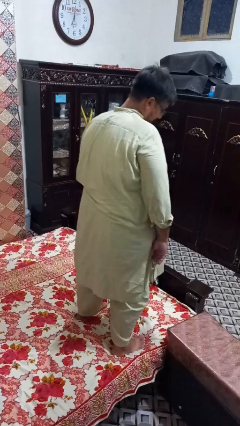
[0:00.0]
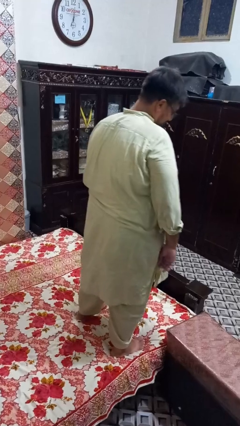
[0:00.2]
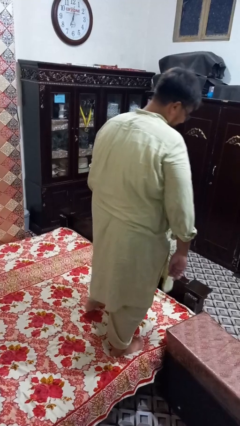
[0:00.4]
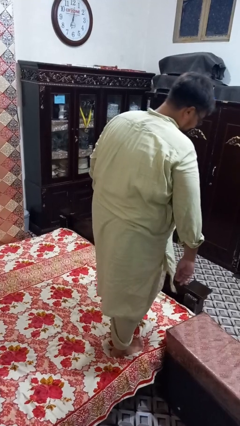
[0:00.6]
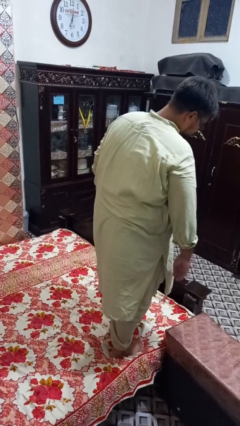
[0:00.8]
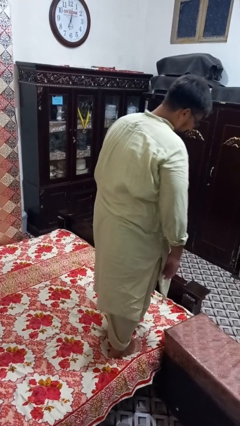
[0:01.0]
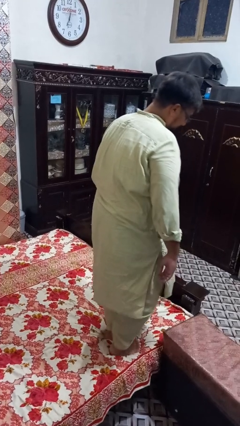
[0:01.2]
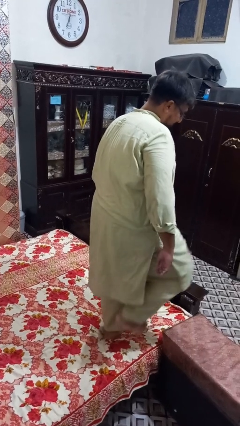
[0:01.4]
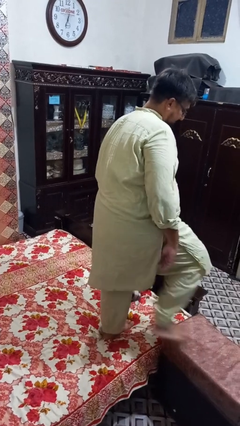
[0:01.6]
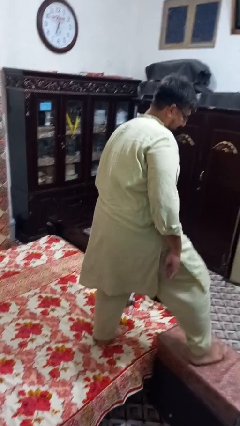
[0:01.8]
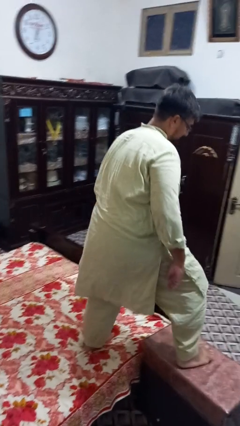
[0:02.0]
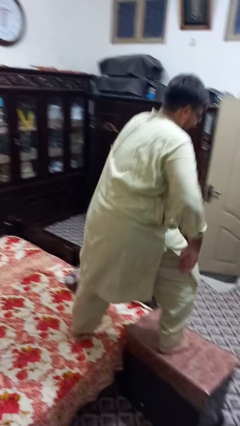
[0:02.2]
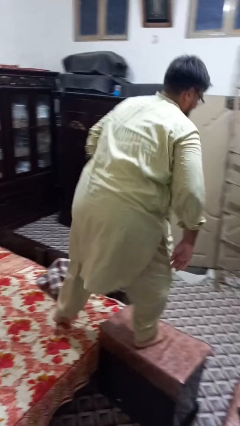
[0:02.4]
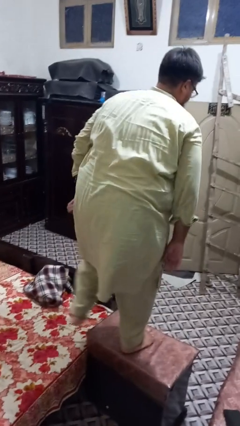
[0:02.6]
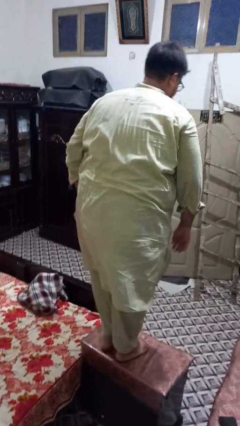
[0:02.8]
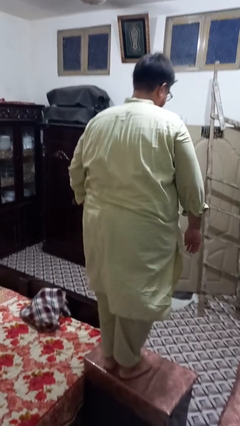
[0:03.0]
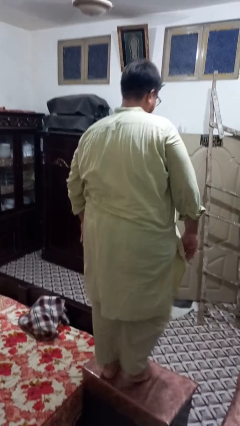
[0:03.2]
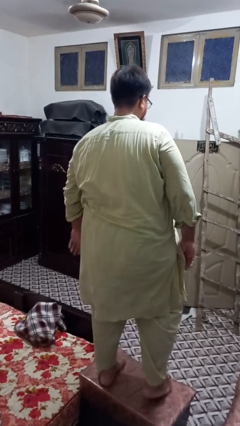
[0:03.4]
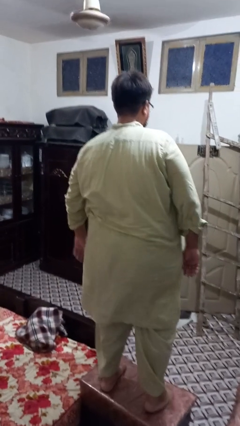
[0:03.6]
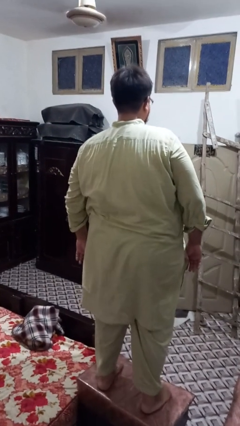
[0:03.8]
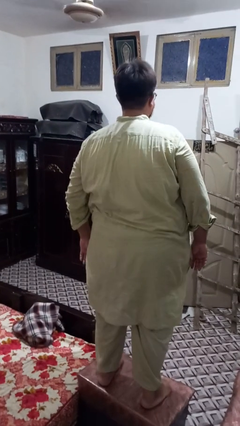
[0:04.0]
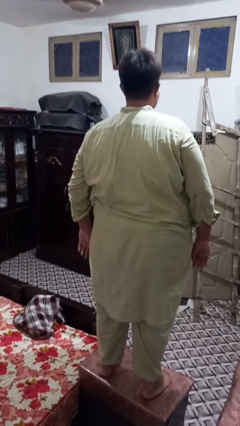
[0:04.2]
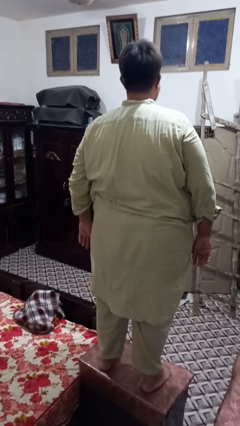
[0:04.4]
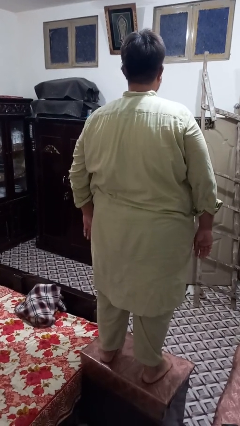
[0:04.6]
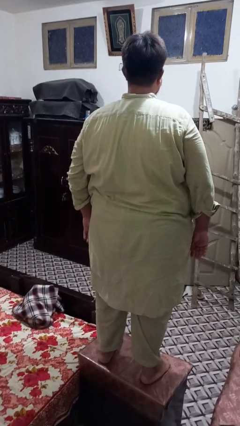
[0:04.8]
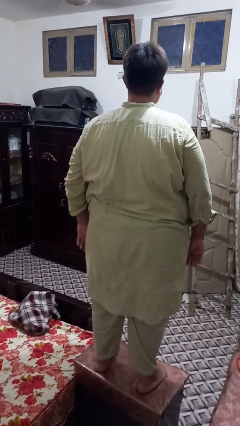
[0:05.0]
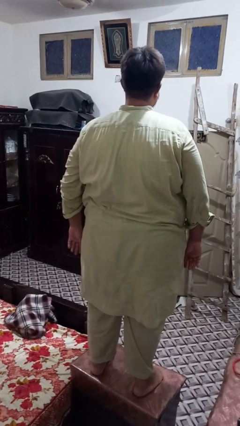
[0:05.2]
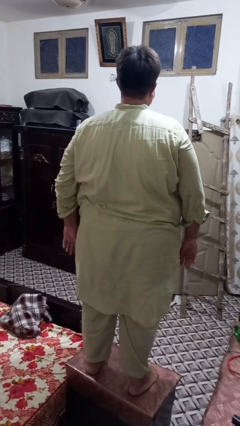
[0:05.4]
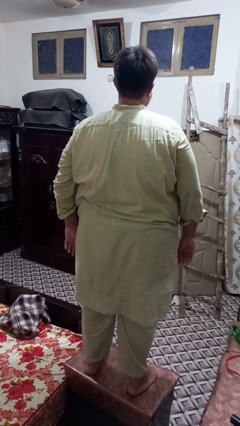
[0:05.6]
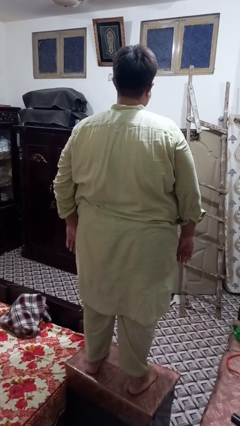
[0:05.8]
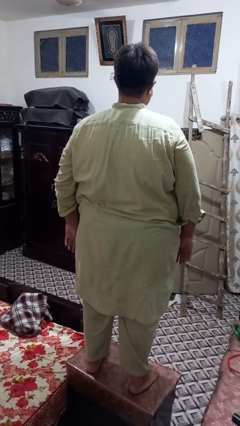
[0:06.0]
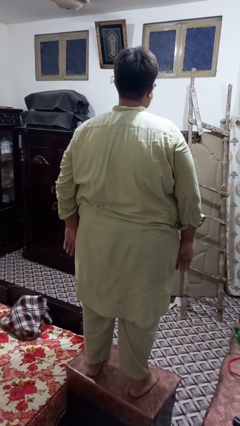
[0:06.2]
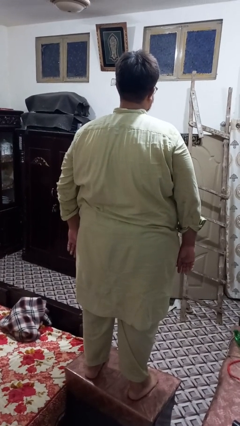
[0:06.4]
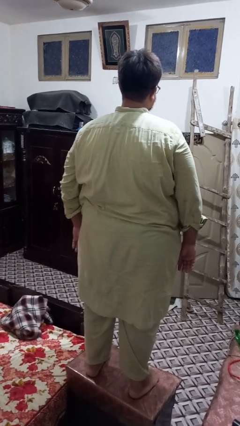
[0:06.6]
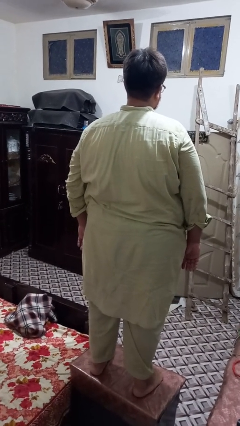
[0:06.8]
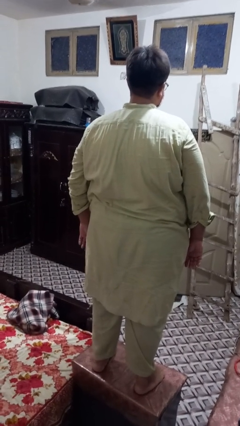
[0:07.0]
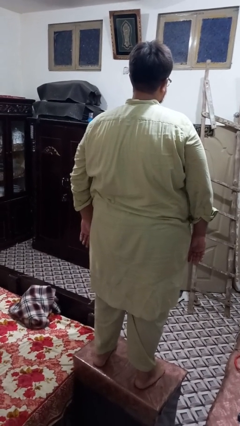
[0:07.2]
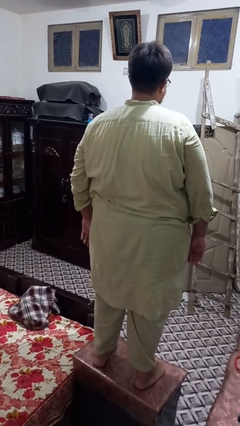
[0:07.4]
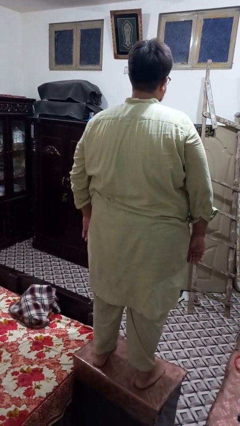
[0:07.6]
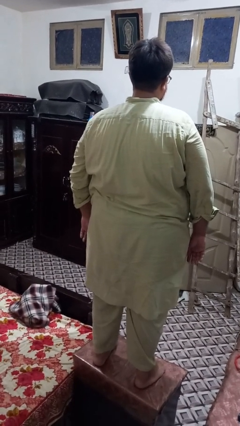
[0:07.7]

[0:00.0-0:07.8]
person climbs on table

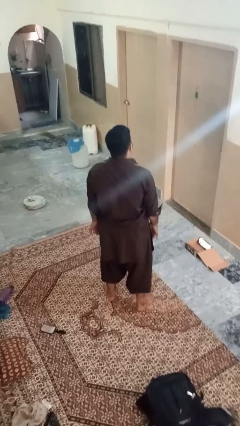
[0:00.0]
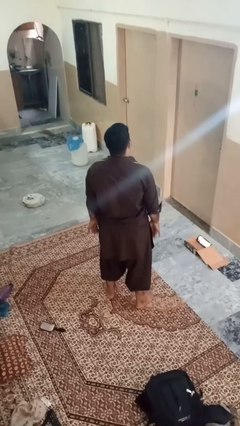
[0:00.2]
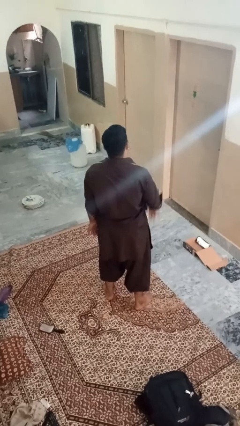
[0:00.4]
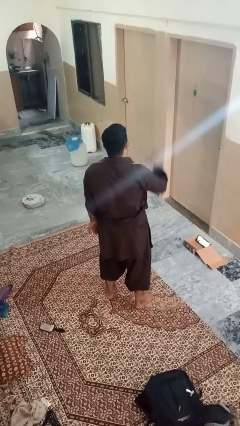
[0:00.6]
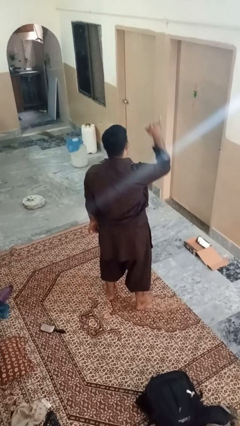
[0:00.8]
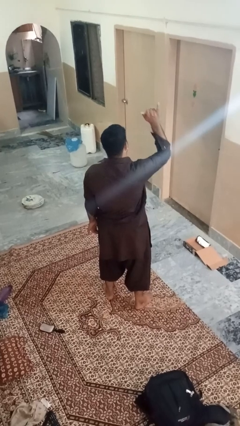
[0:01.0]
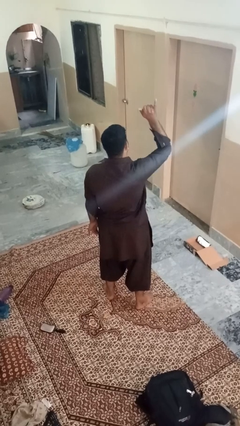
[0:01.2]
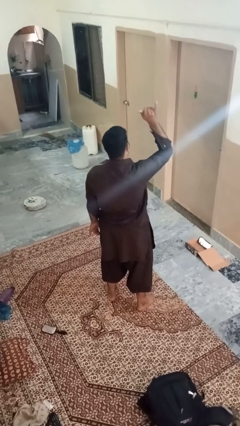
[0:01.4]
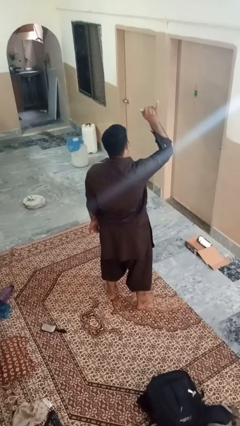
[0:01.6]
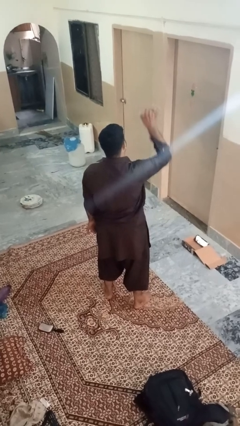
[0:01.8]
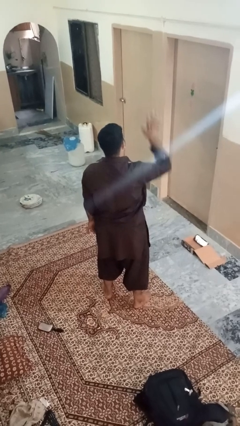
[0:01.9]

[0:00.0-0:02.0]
person gestures hang loose

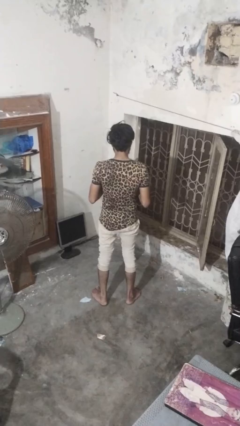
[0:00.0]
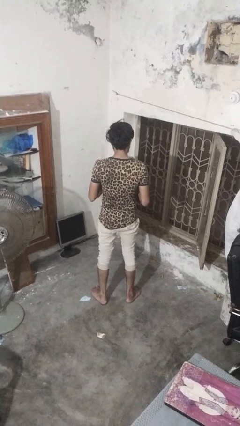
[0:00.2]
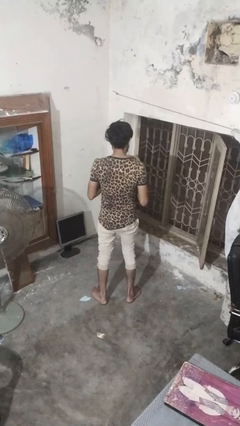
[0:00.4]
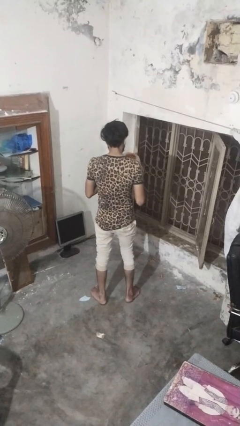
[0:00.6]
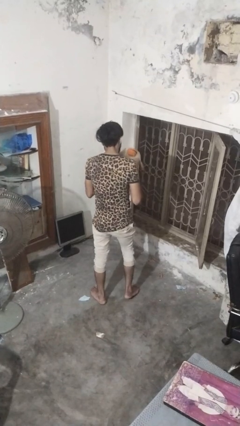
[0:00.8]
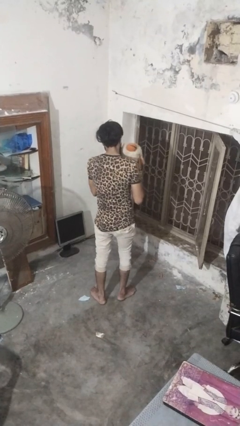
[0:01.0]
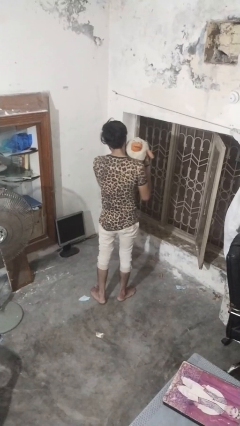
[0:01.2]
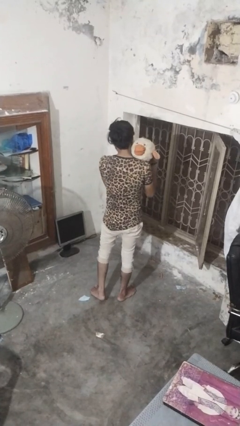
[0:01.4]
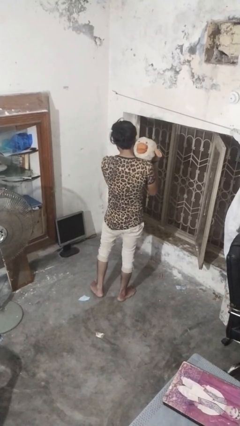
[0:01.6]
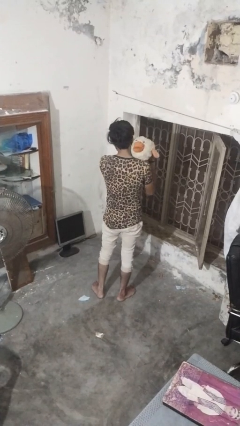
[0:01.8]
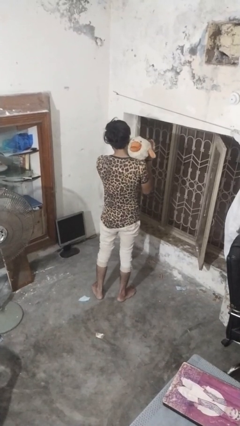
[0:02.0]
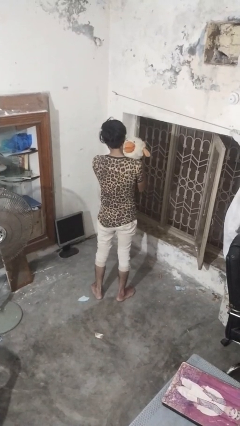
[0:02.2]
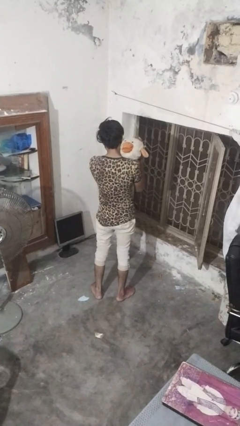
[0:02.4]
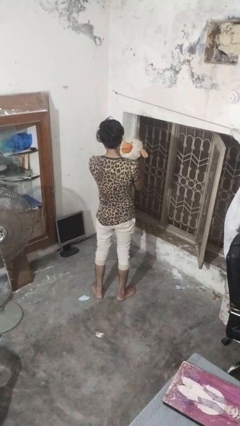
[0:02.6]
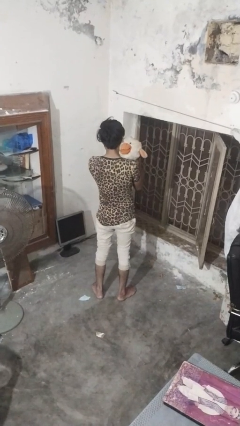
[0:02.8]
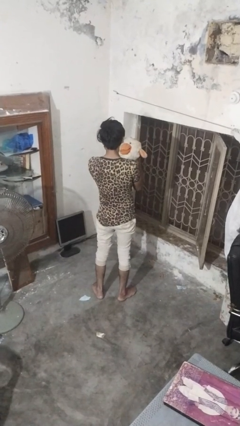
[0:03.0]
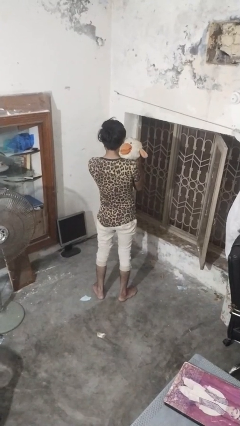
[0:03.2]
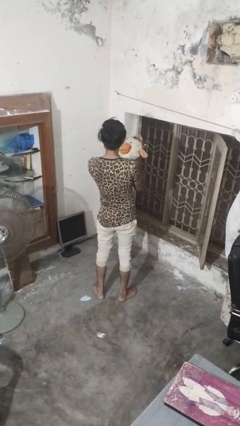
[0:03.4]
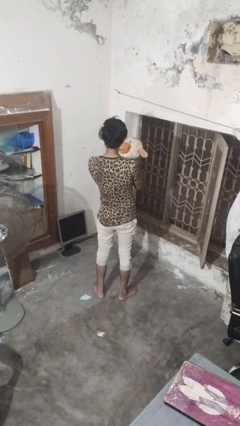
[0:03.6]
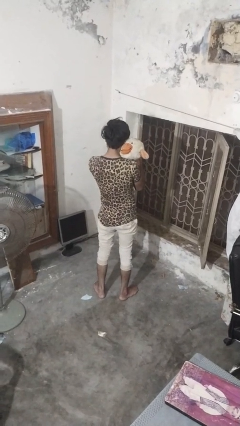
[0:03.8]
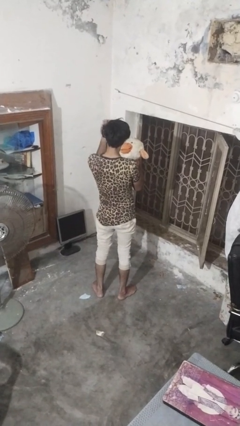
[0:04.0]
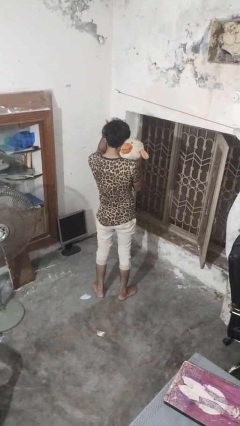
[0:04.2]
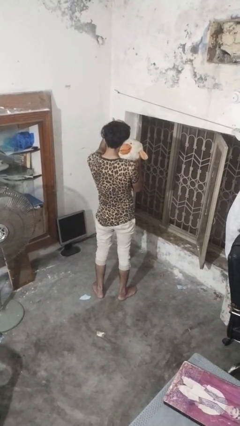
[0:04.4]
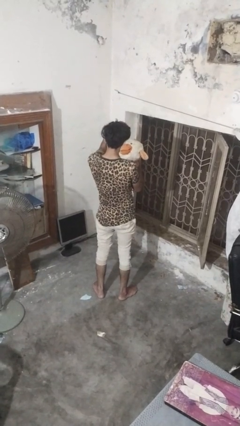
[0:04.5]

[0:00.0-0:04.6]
person hugs stuffed animal

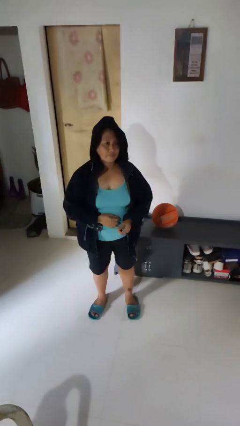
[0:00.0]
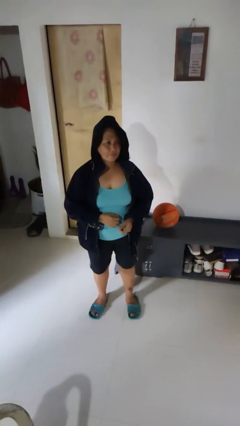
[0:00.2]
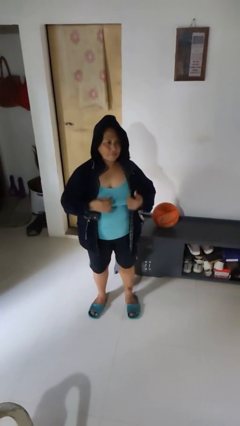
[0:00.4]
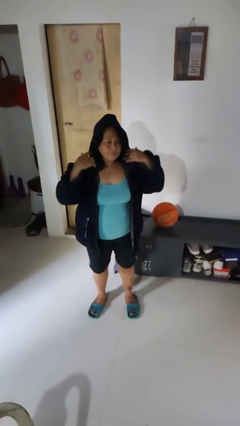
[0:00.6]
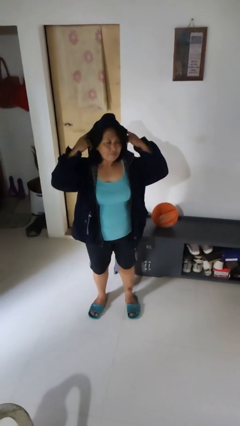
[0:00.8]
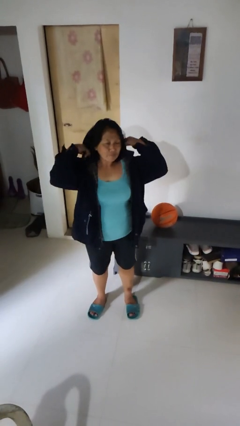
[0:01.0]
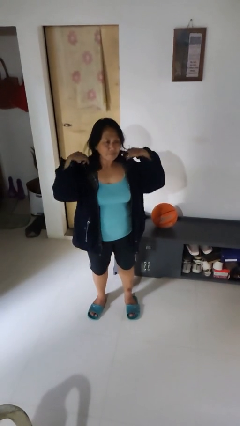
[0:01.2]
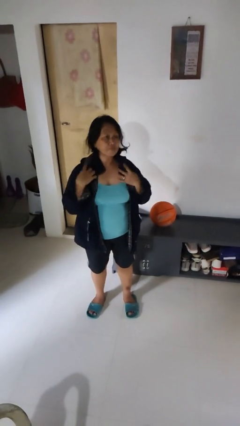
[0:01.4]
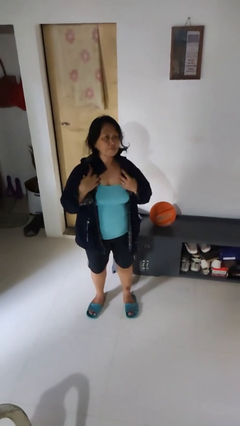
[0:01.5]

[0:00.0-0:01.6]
person takes off hoodie

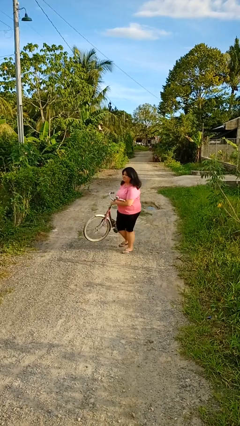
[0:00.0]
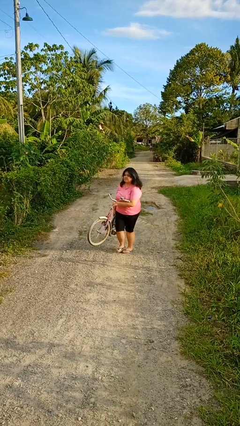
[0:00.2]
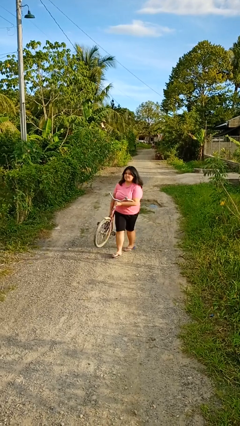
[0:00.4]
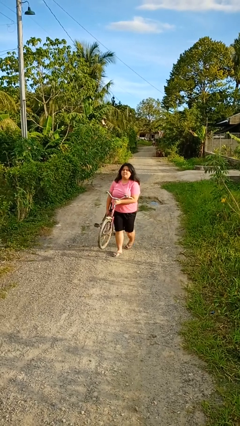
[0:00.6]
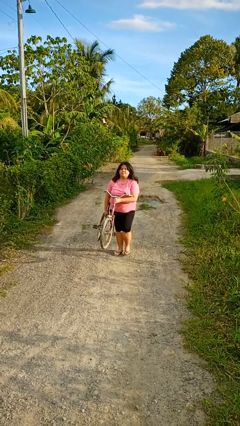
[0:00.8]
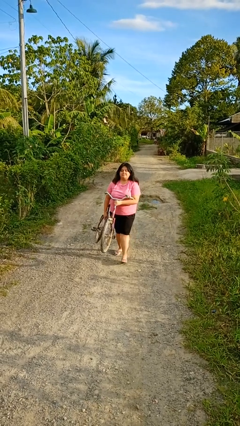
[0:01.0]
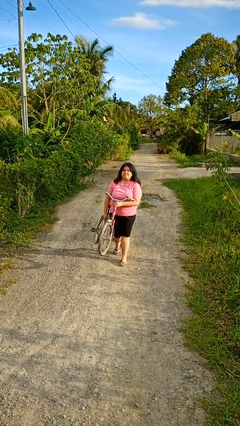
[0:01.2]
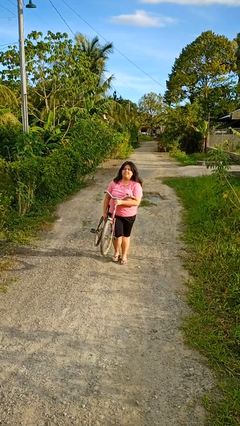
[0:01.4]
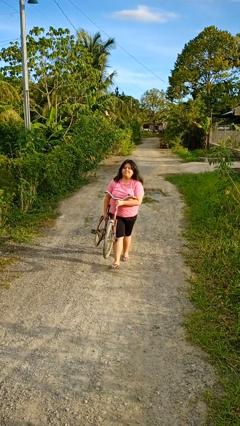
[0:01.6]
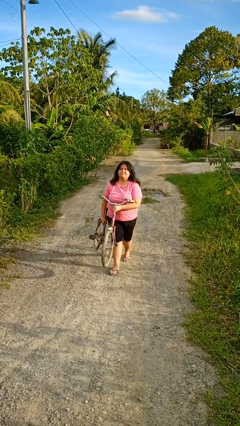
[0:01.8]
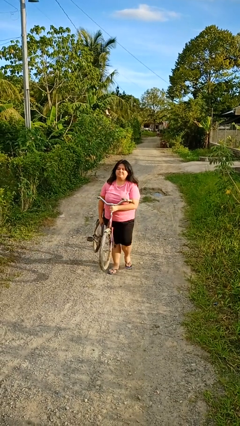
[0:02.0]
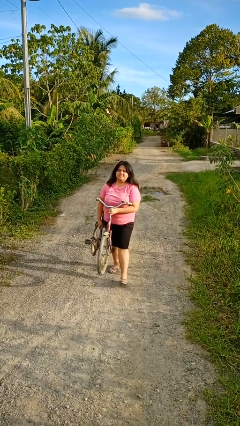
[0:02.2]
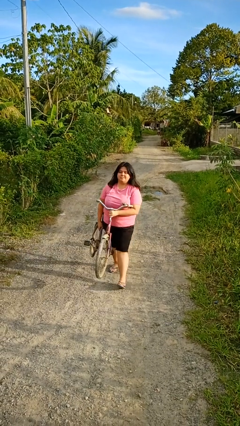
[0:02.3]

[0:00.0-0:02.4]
person carries bicycle
